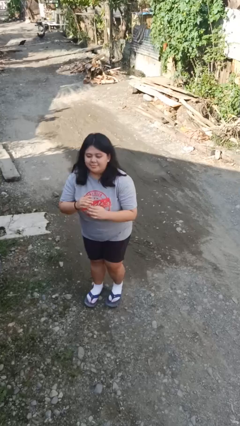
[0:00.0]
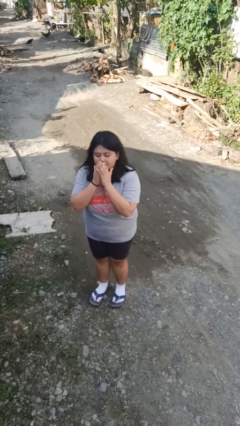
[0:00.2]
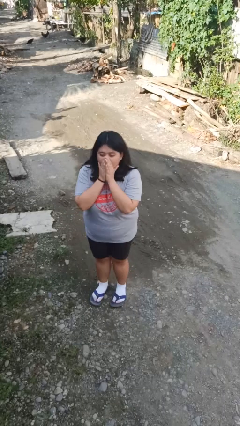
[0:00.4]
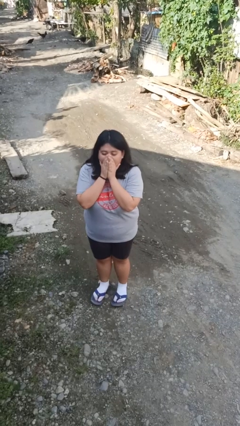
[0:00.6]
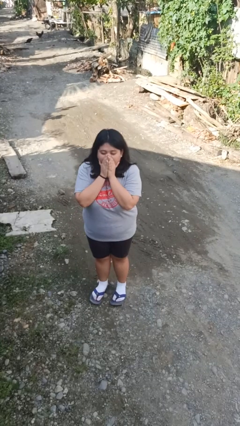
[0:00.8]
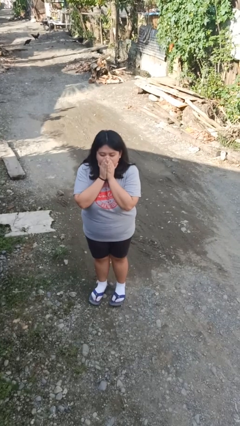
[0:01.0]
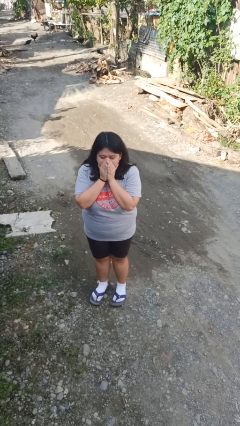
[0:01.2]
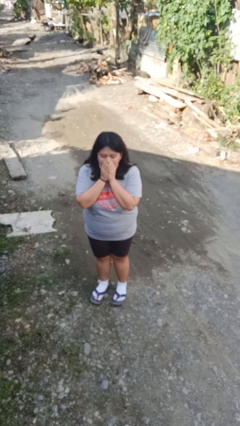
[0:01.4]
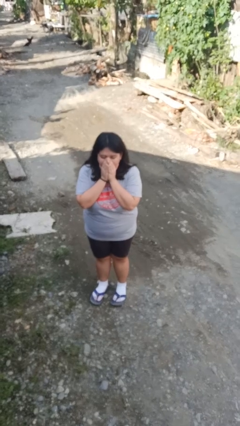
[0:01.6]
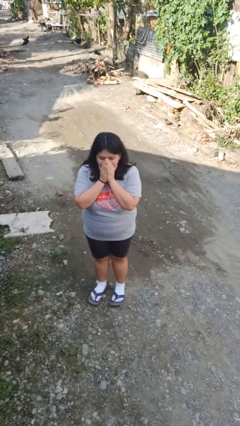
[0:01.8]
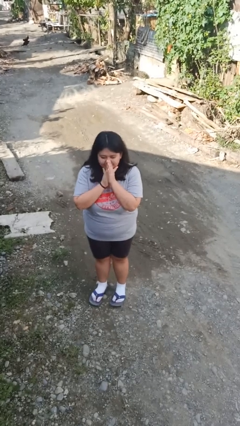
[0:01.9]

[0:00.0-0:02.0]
person blows into hands

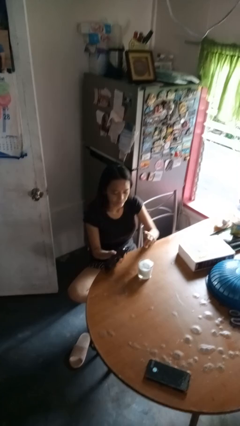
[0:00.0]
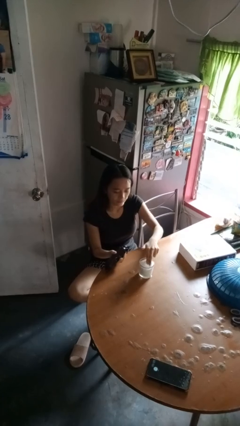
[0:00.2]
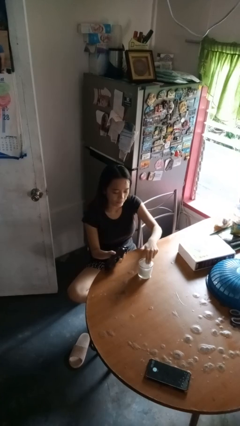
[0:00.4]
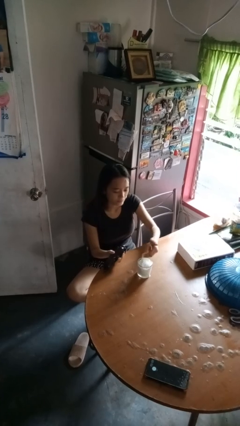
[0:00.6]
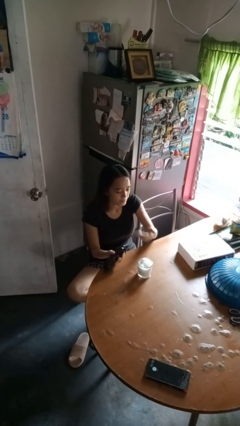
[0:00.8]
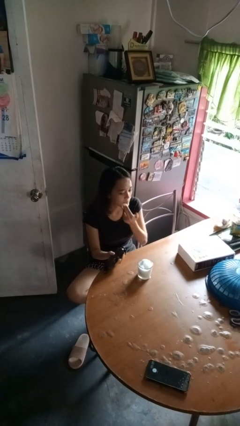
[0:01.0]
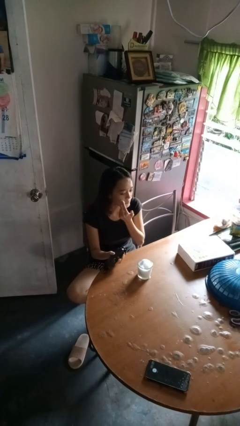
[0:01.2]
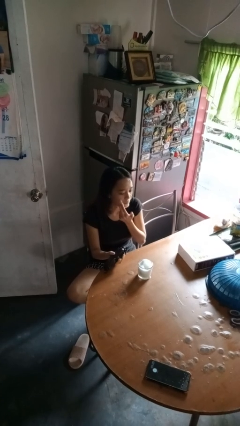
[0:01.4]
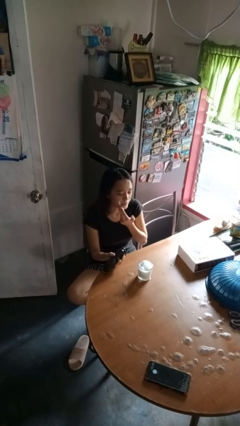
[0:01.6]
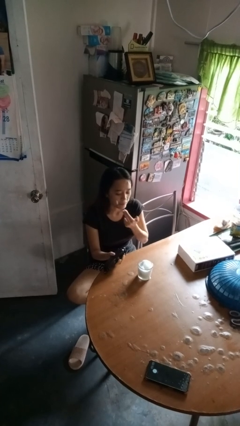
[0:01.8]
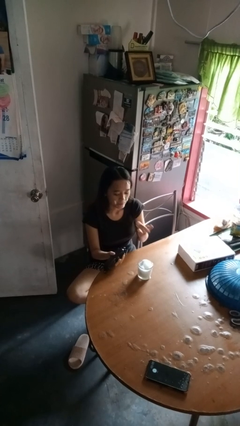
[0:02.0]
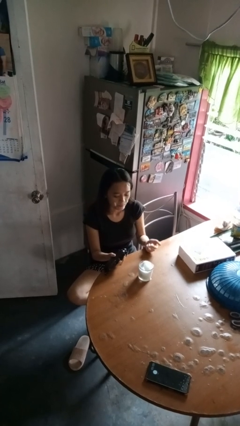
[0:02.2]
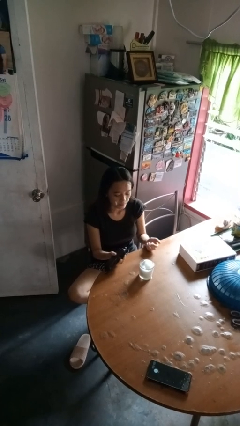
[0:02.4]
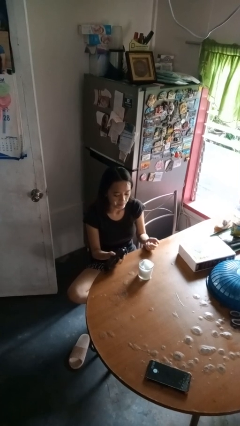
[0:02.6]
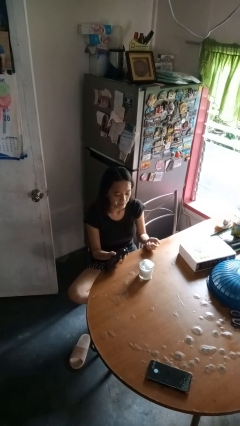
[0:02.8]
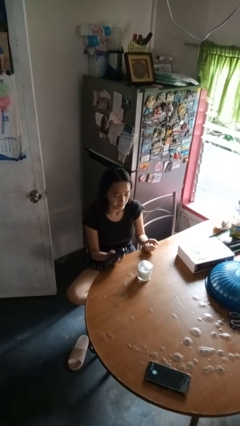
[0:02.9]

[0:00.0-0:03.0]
person applies shaving cream

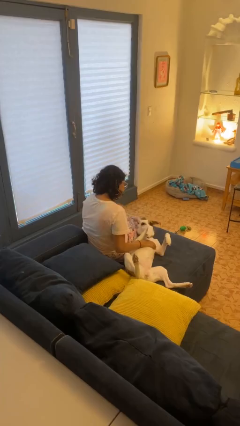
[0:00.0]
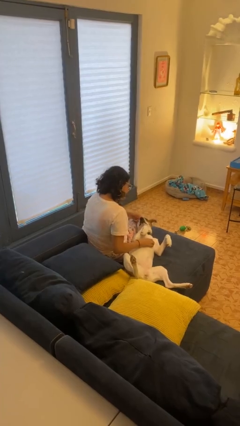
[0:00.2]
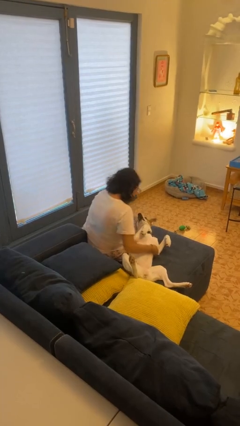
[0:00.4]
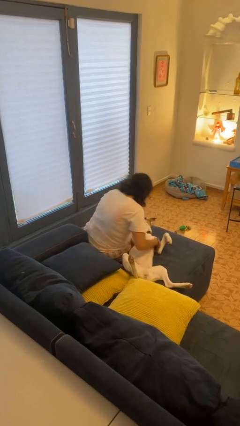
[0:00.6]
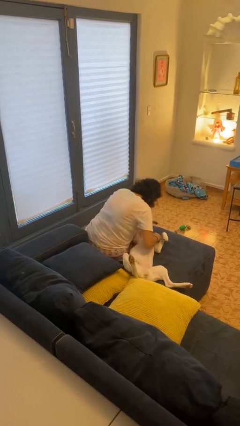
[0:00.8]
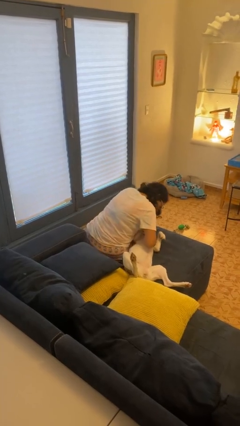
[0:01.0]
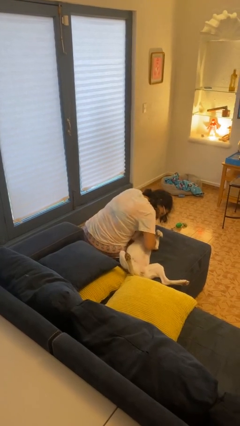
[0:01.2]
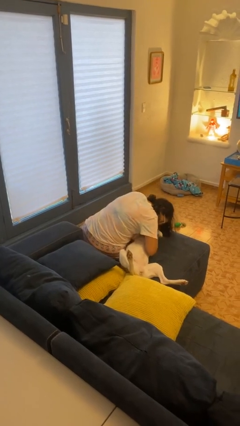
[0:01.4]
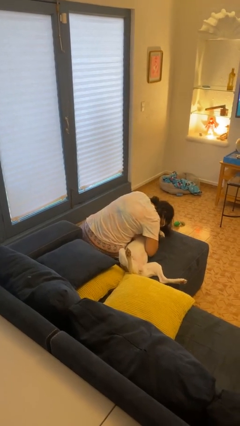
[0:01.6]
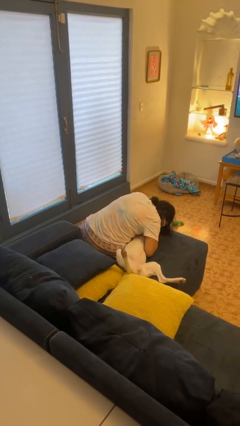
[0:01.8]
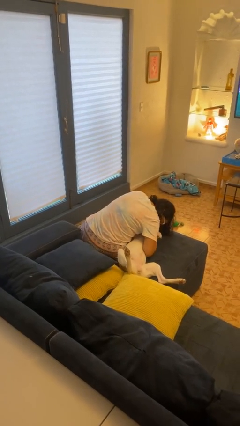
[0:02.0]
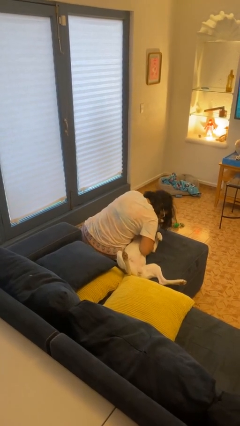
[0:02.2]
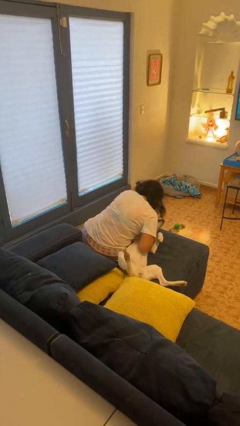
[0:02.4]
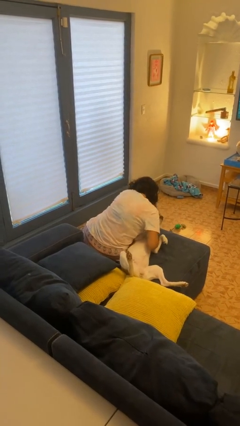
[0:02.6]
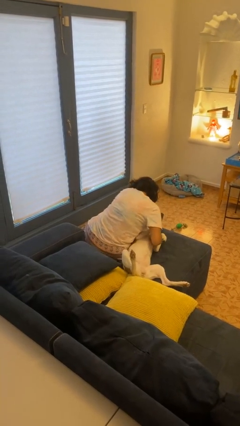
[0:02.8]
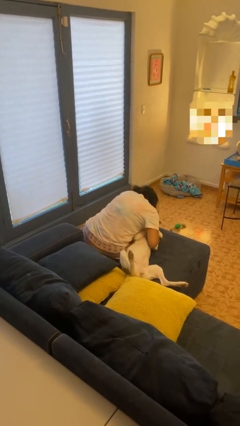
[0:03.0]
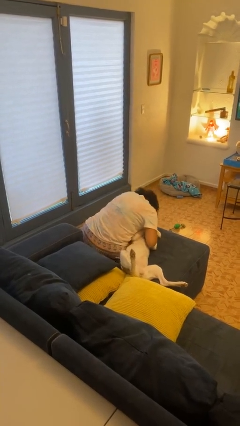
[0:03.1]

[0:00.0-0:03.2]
person hugs dog

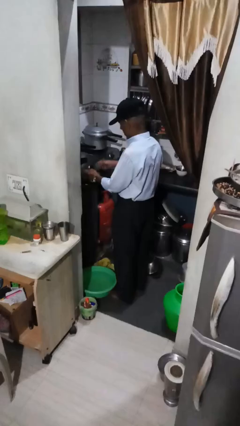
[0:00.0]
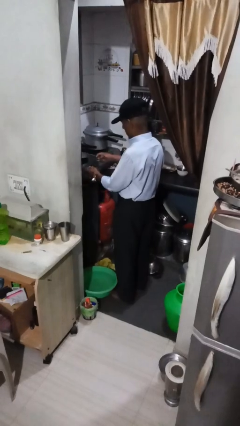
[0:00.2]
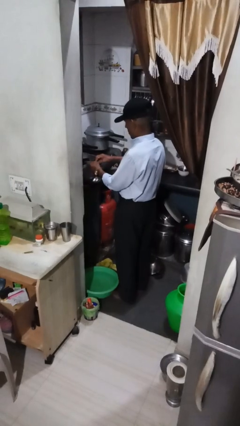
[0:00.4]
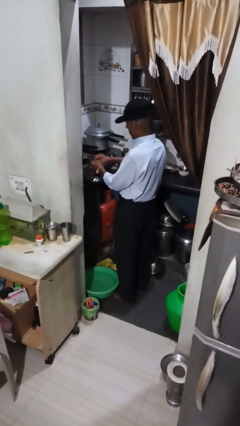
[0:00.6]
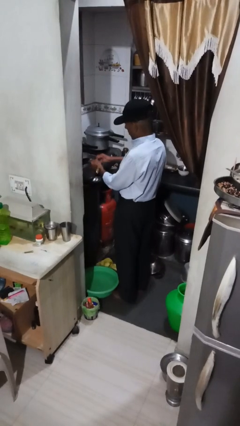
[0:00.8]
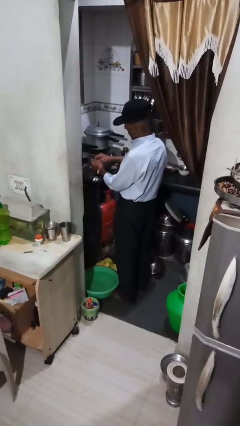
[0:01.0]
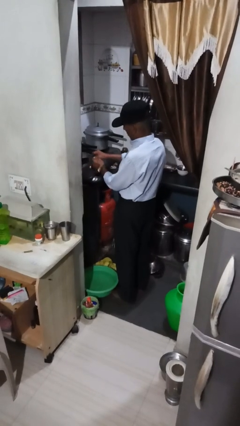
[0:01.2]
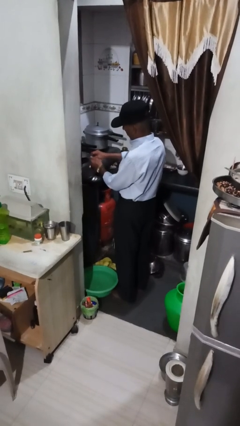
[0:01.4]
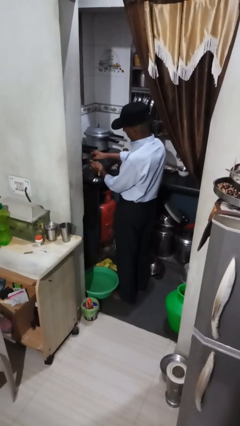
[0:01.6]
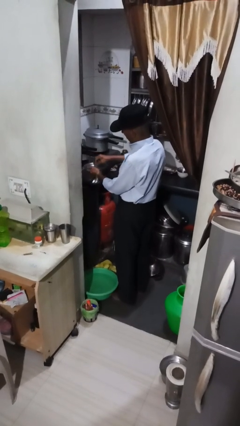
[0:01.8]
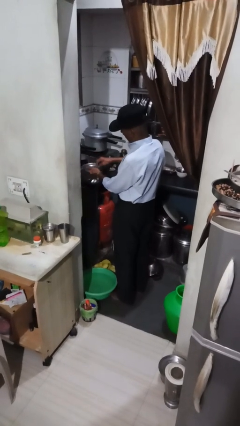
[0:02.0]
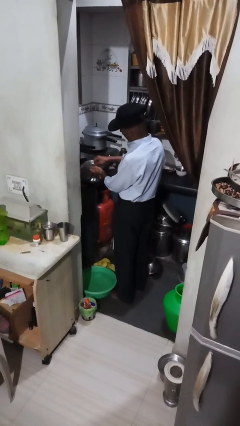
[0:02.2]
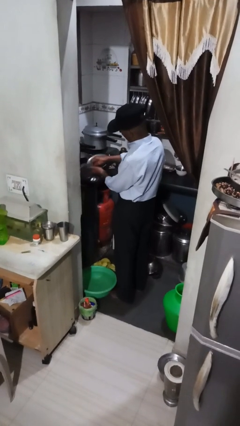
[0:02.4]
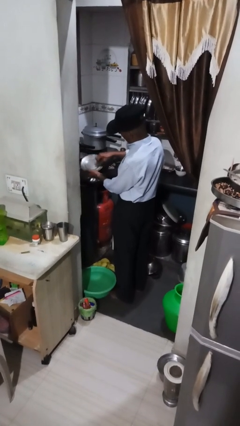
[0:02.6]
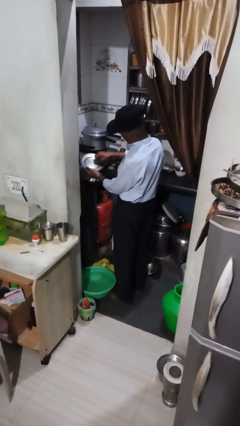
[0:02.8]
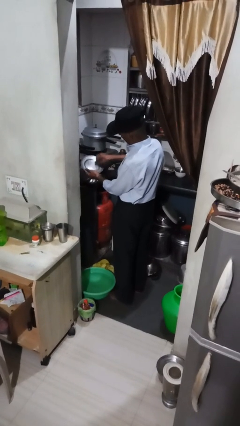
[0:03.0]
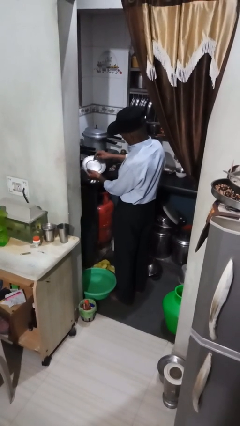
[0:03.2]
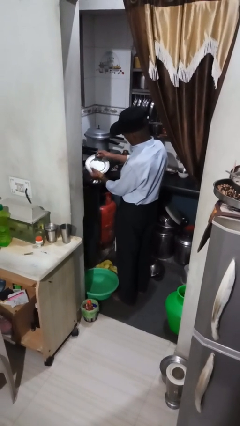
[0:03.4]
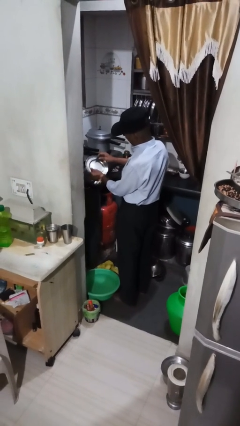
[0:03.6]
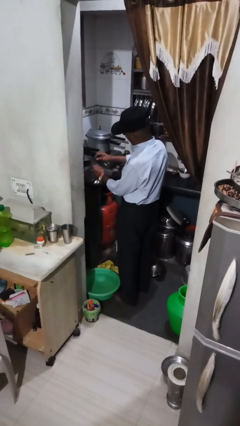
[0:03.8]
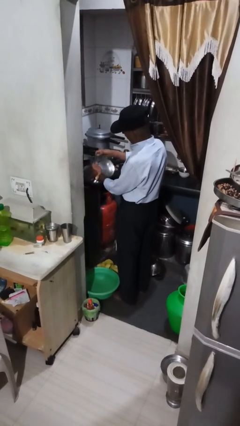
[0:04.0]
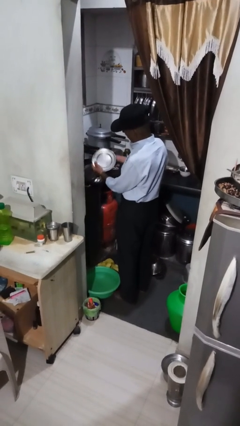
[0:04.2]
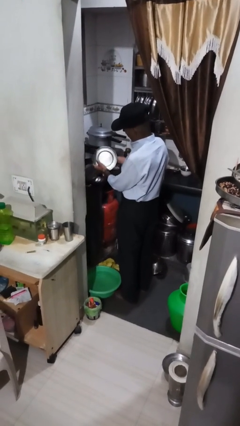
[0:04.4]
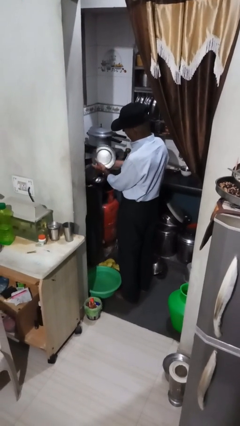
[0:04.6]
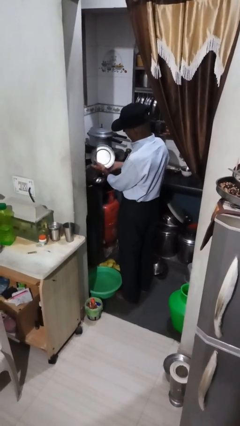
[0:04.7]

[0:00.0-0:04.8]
person washes dish

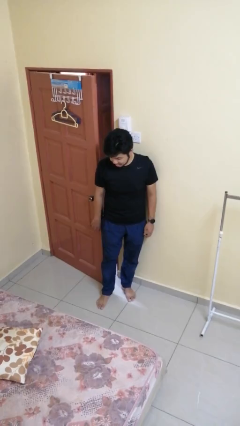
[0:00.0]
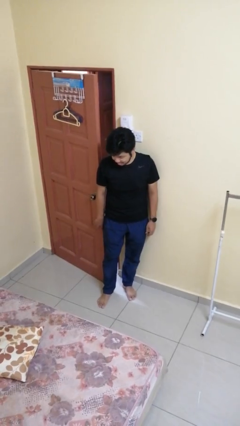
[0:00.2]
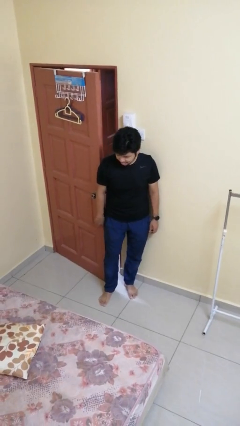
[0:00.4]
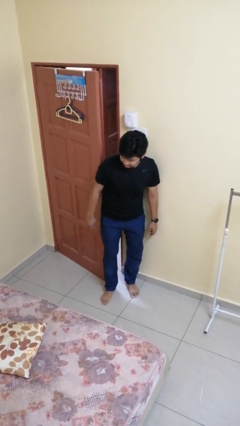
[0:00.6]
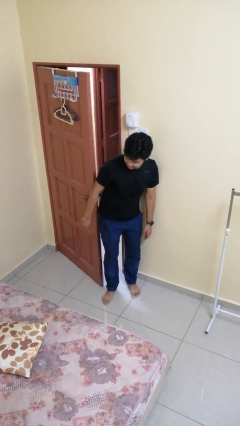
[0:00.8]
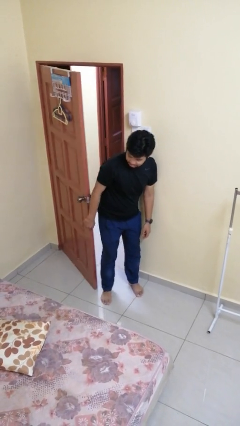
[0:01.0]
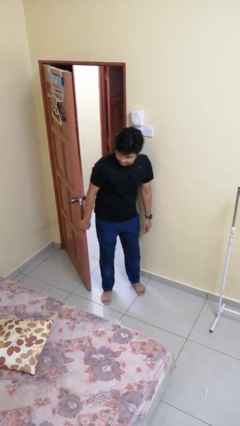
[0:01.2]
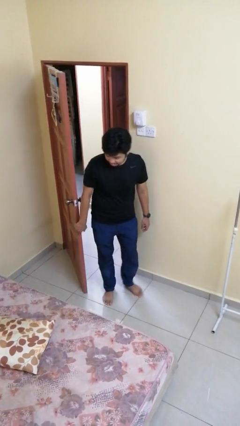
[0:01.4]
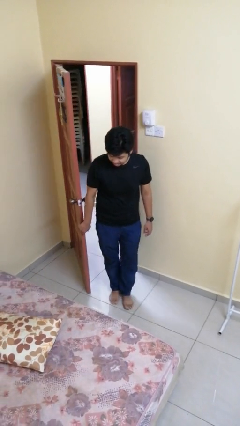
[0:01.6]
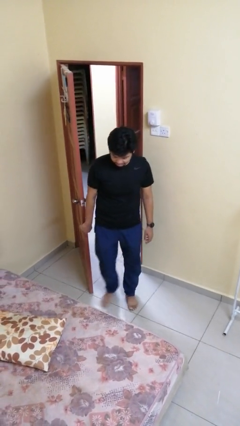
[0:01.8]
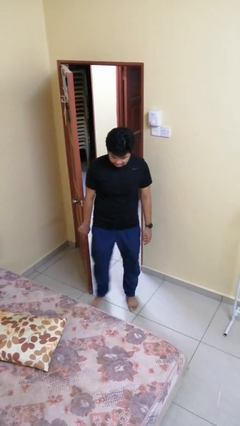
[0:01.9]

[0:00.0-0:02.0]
person opens facility door

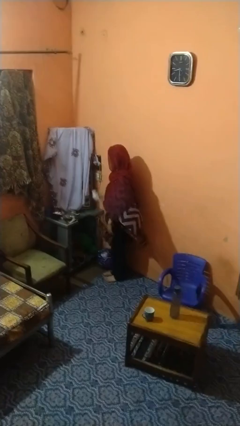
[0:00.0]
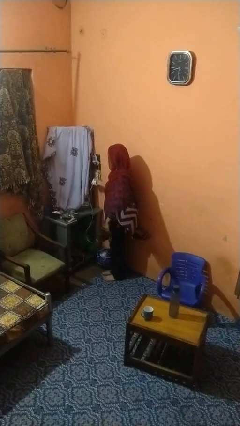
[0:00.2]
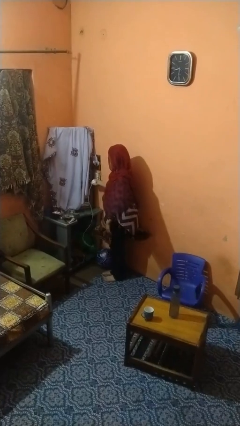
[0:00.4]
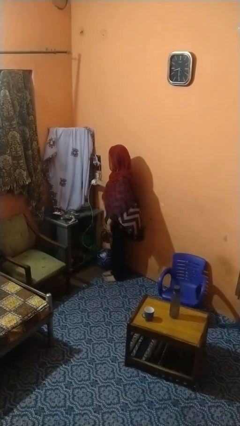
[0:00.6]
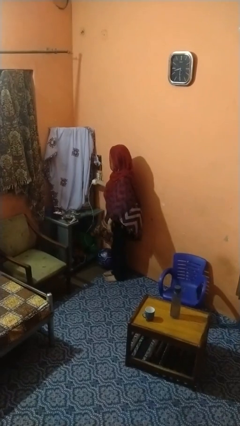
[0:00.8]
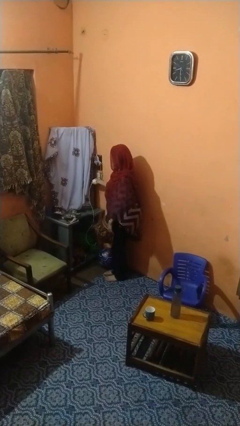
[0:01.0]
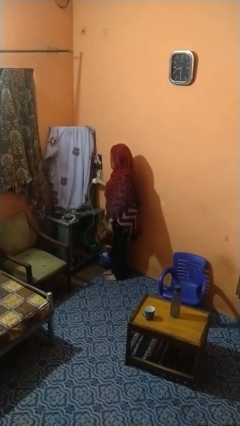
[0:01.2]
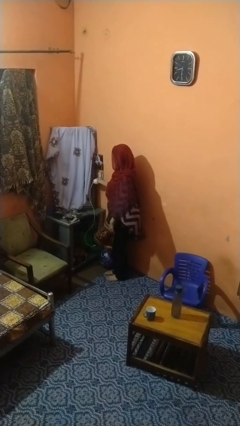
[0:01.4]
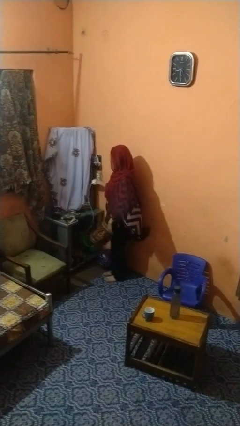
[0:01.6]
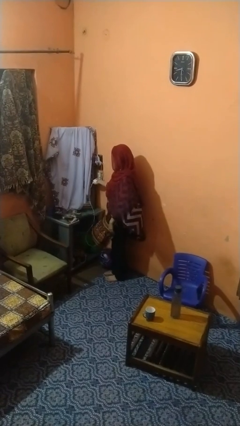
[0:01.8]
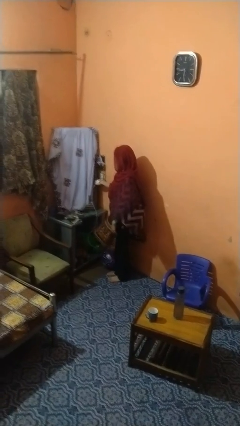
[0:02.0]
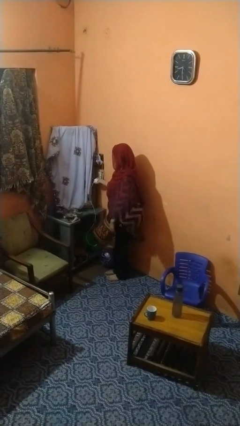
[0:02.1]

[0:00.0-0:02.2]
person plugs into electrical socket
